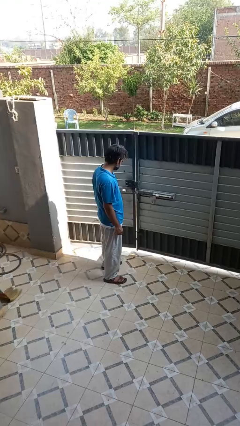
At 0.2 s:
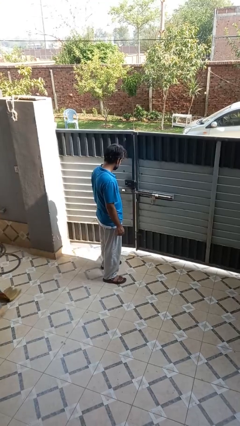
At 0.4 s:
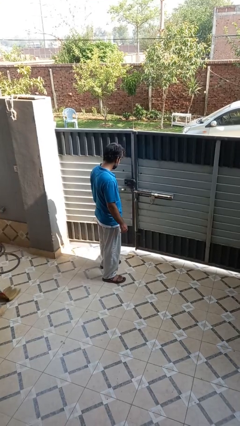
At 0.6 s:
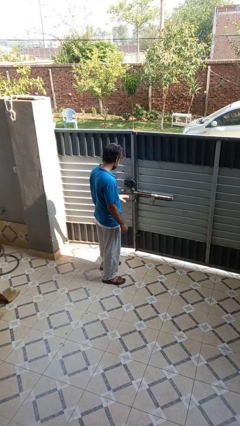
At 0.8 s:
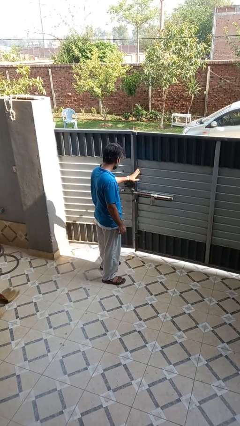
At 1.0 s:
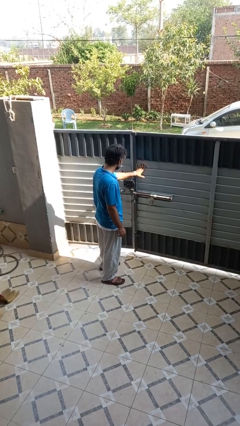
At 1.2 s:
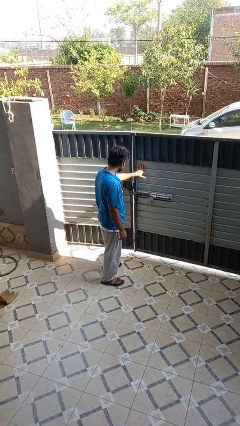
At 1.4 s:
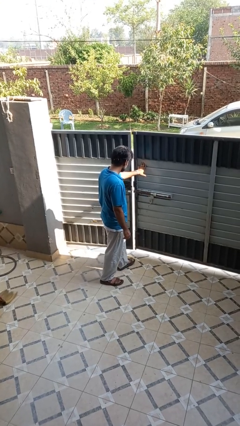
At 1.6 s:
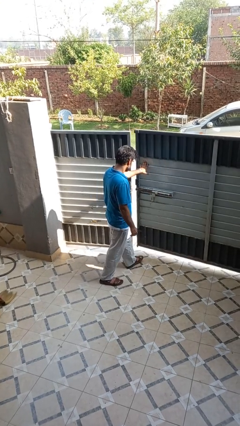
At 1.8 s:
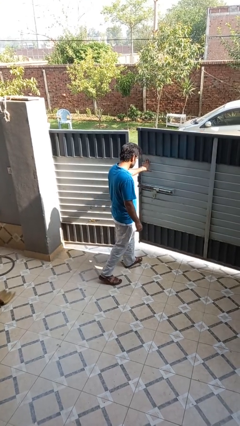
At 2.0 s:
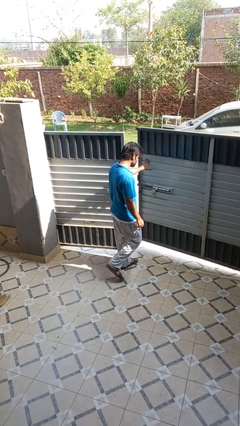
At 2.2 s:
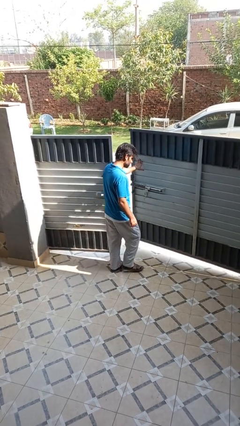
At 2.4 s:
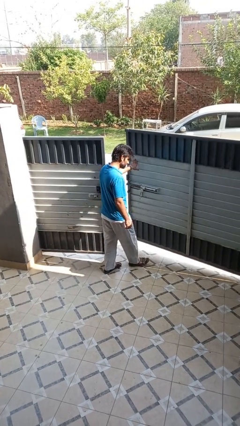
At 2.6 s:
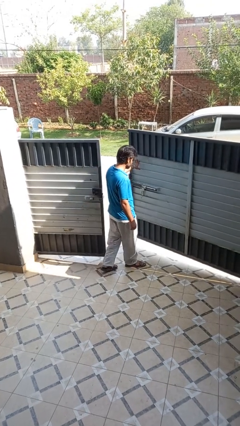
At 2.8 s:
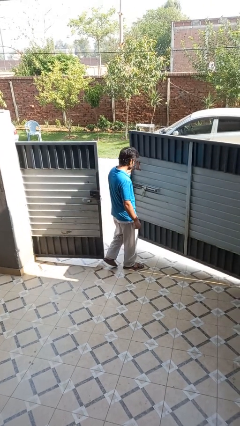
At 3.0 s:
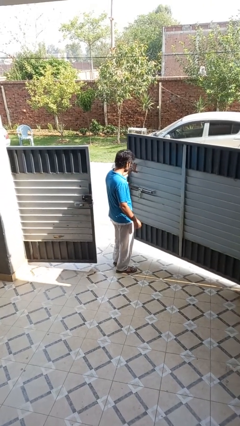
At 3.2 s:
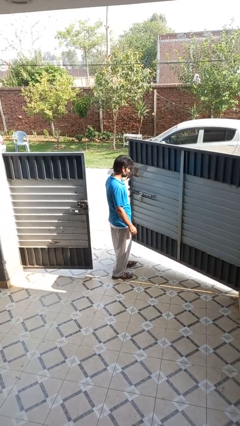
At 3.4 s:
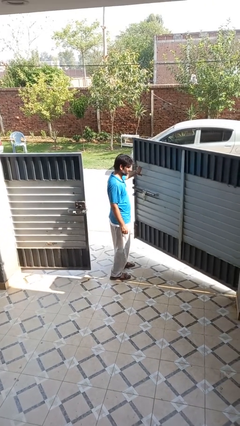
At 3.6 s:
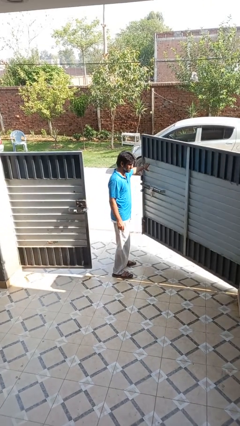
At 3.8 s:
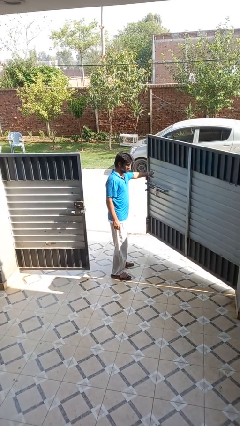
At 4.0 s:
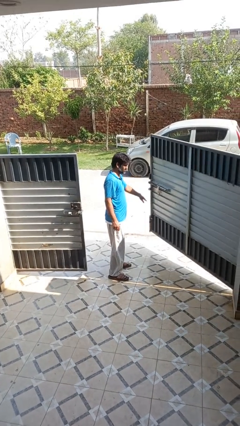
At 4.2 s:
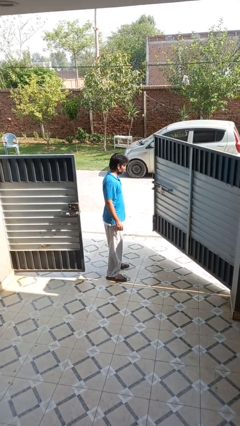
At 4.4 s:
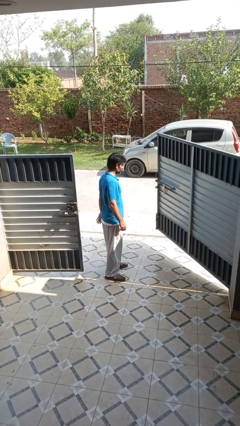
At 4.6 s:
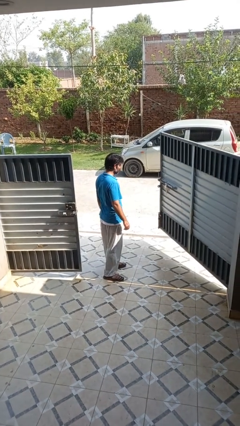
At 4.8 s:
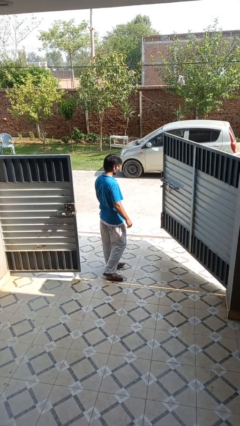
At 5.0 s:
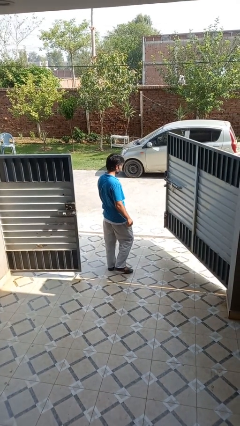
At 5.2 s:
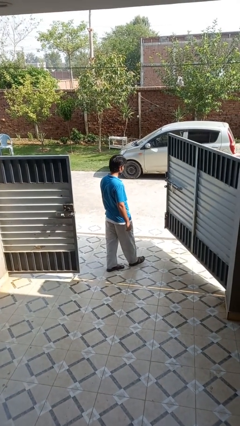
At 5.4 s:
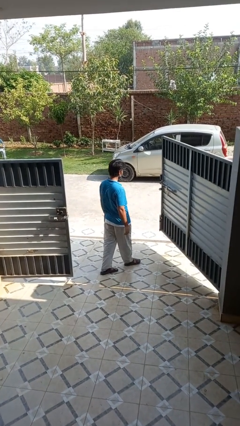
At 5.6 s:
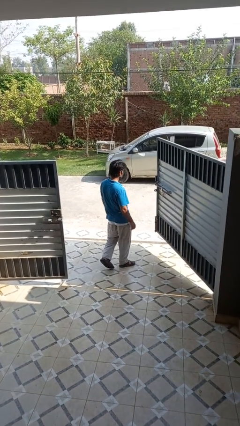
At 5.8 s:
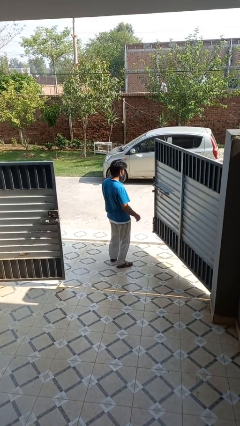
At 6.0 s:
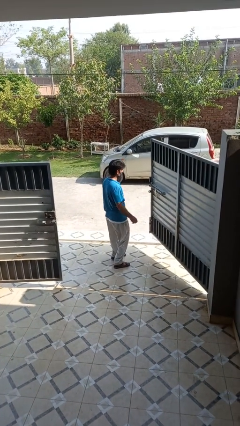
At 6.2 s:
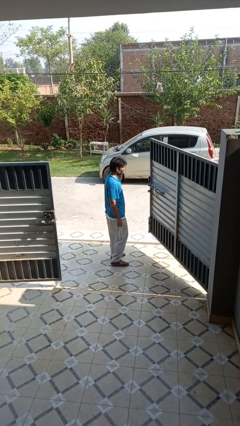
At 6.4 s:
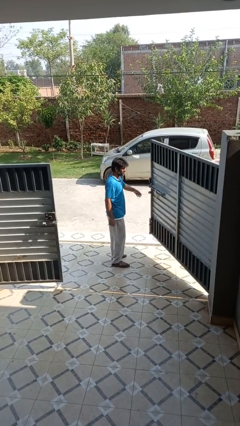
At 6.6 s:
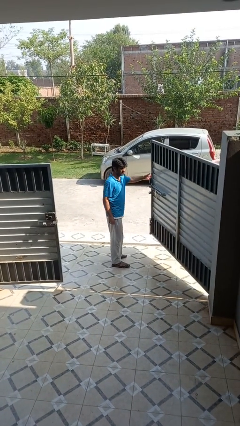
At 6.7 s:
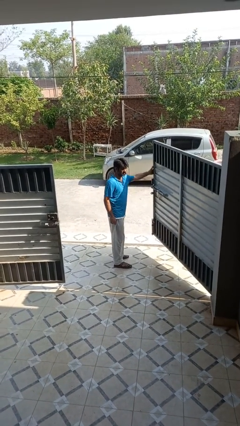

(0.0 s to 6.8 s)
person opens gate

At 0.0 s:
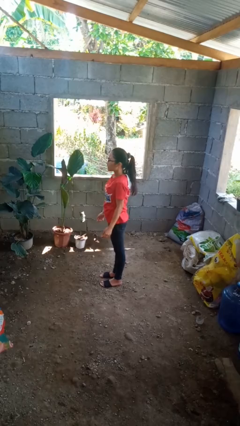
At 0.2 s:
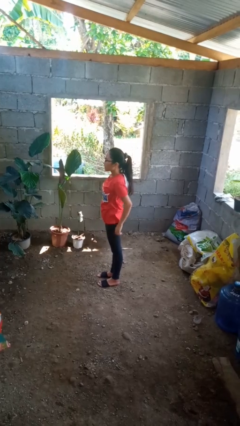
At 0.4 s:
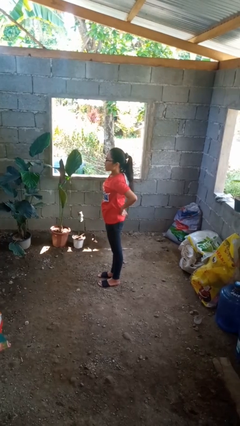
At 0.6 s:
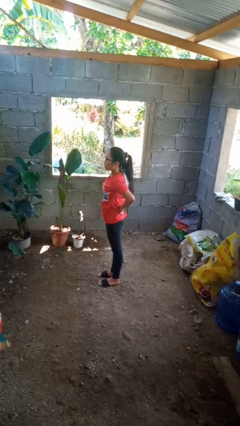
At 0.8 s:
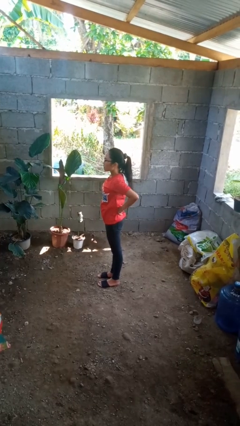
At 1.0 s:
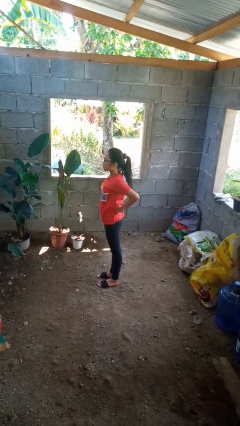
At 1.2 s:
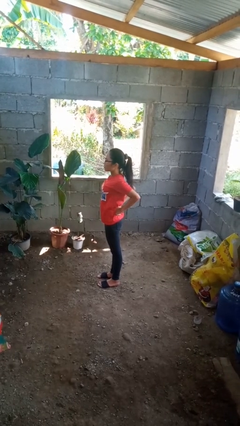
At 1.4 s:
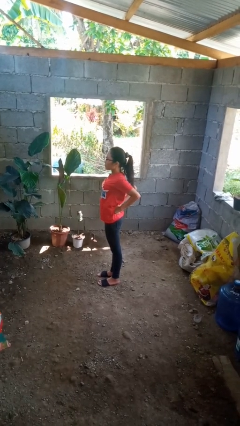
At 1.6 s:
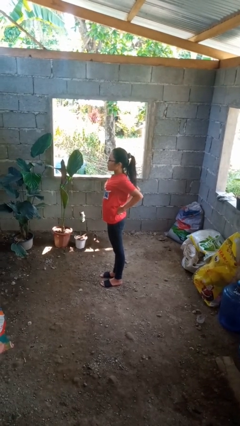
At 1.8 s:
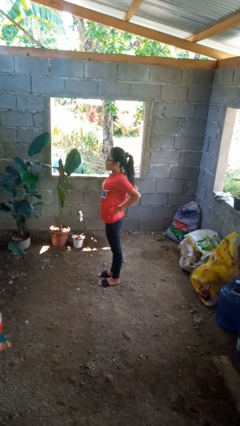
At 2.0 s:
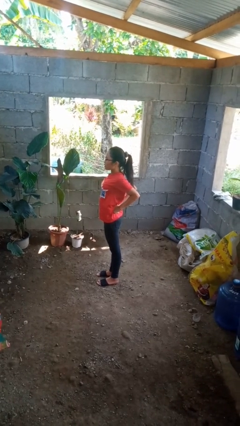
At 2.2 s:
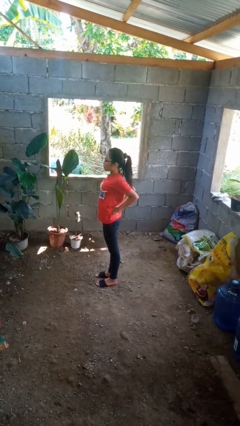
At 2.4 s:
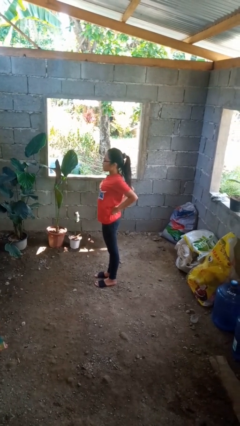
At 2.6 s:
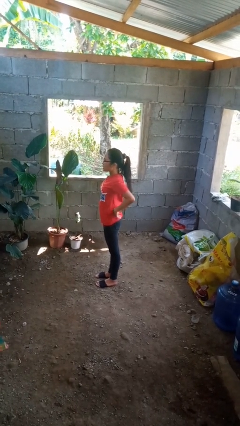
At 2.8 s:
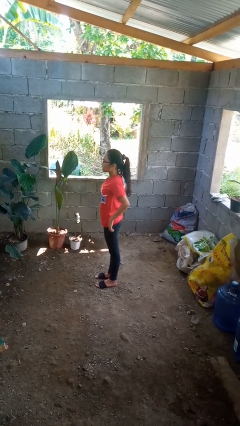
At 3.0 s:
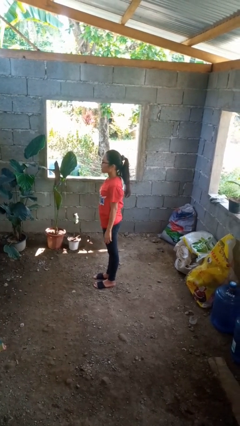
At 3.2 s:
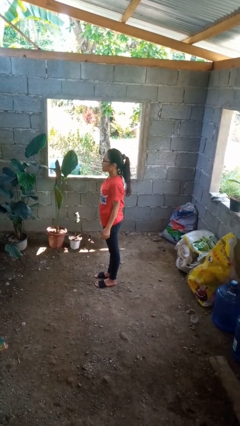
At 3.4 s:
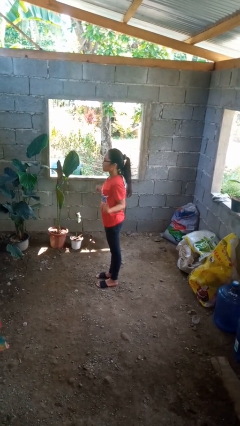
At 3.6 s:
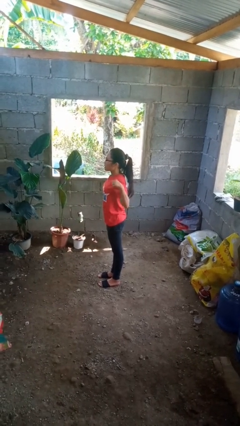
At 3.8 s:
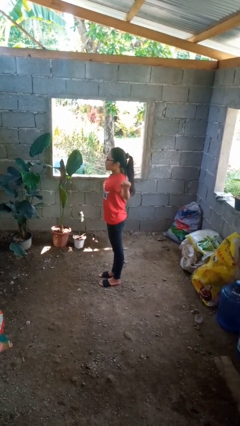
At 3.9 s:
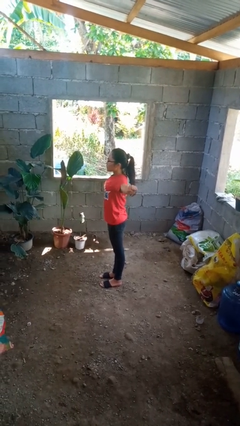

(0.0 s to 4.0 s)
person stretches back

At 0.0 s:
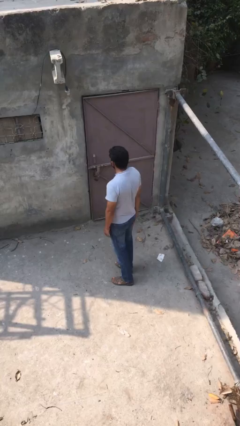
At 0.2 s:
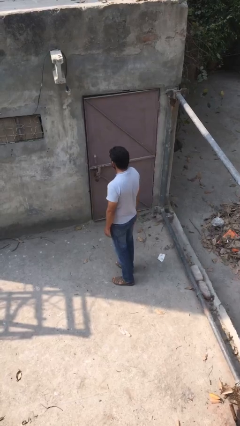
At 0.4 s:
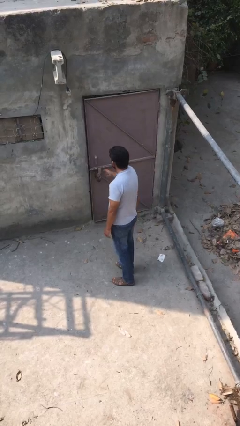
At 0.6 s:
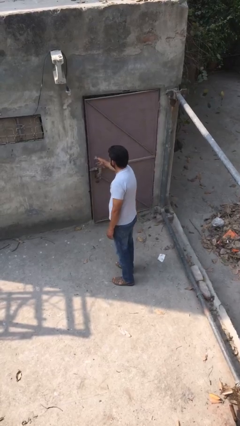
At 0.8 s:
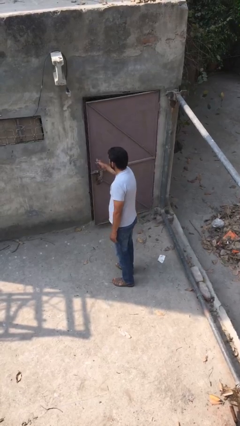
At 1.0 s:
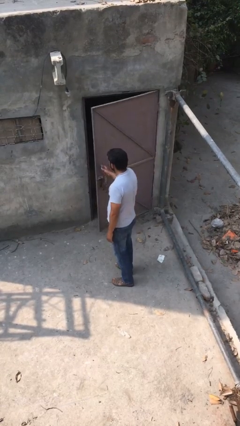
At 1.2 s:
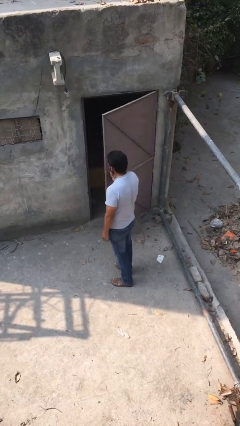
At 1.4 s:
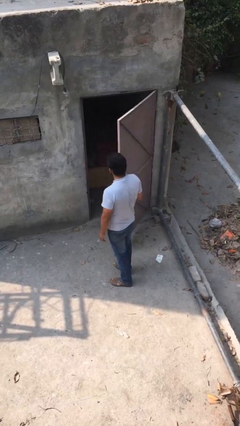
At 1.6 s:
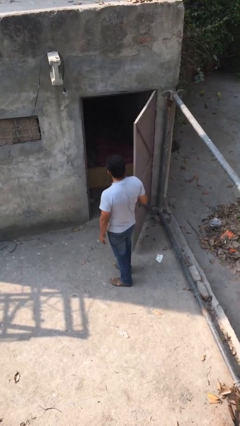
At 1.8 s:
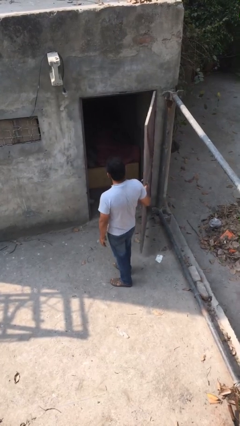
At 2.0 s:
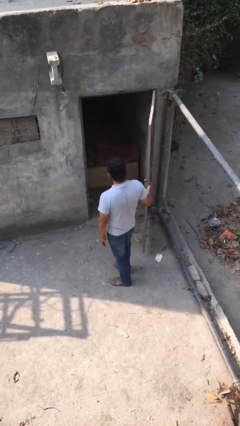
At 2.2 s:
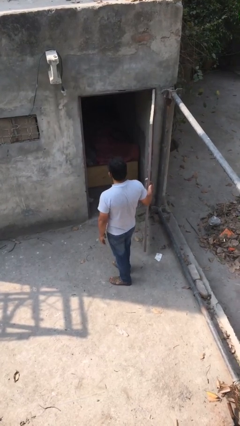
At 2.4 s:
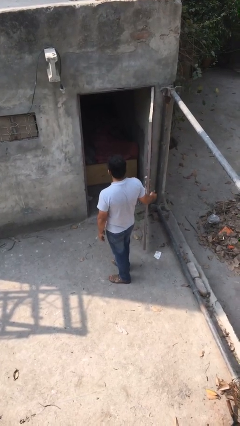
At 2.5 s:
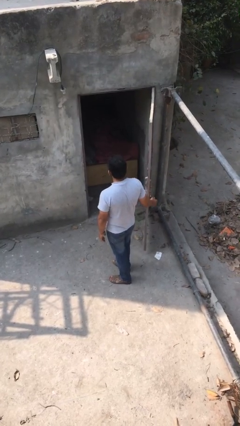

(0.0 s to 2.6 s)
person opens facility door

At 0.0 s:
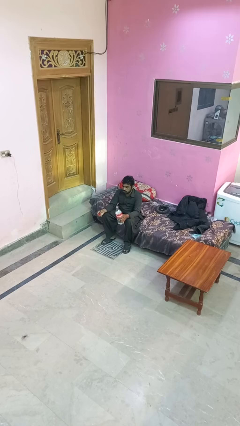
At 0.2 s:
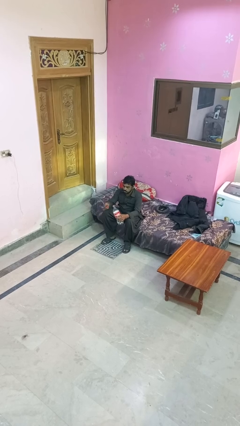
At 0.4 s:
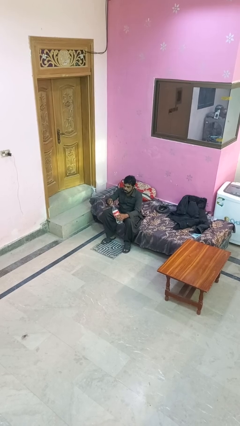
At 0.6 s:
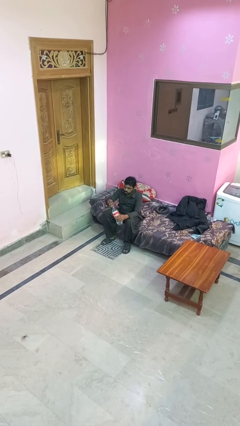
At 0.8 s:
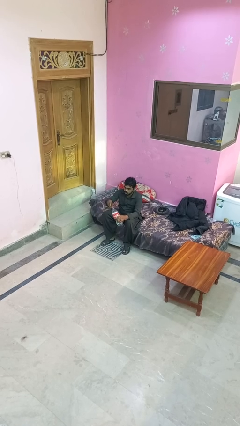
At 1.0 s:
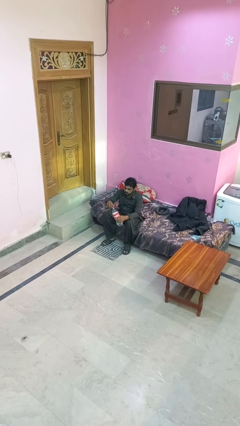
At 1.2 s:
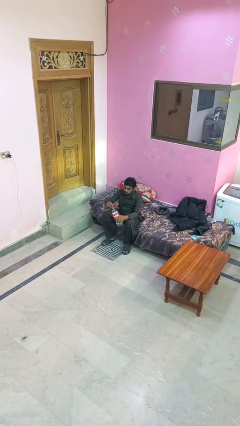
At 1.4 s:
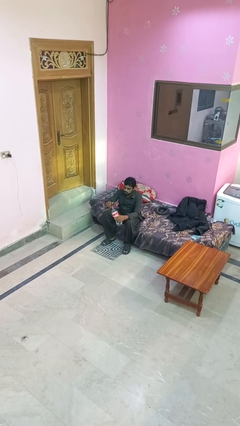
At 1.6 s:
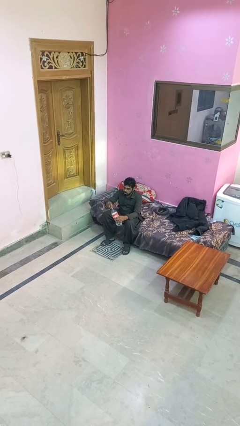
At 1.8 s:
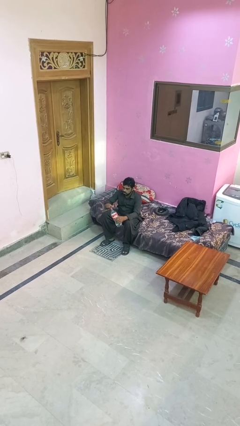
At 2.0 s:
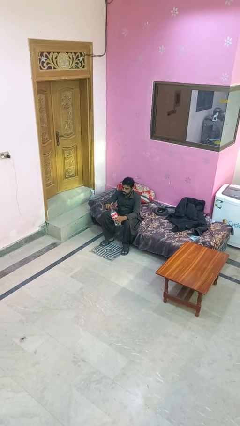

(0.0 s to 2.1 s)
person screws lid to bottle

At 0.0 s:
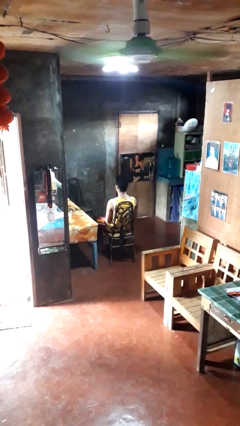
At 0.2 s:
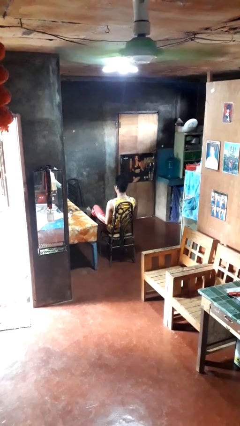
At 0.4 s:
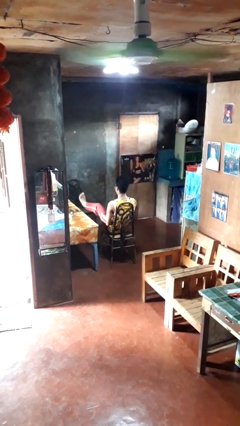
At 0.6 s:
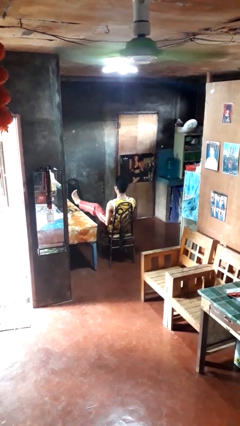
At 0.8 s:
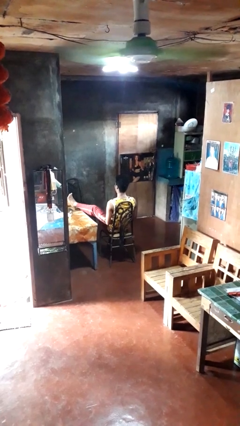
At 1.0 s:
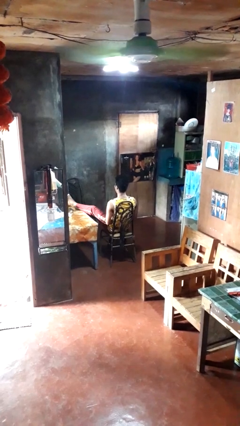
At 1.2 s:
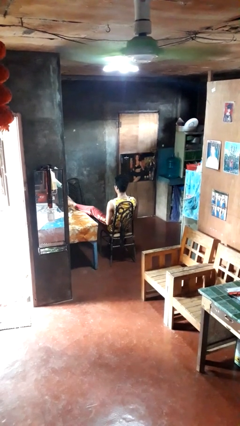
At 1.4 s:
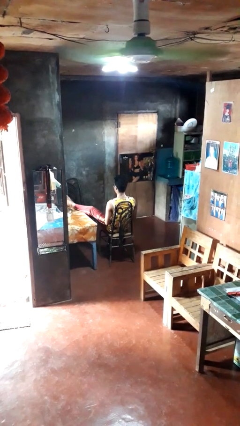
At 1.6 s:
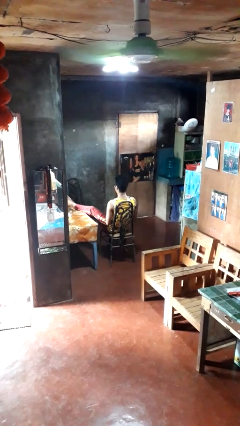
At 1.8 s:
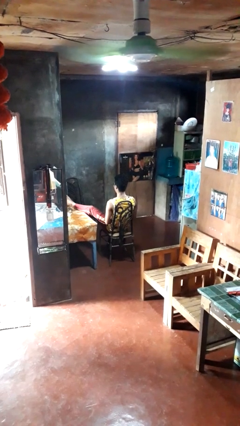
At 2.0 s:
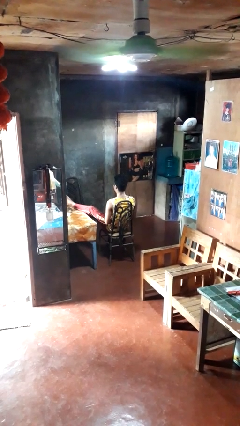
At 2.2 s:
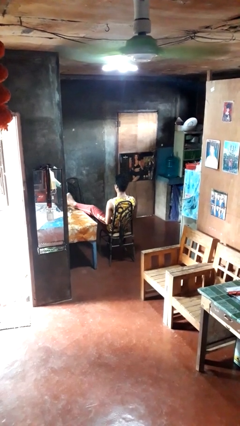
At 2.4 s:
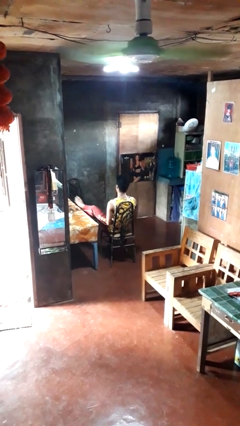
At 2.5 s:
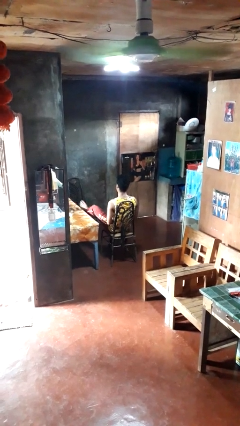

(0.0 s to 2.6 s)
person puts feet up
